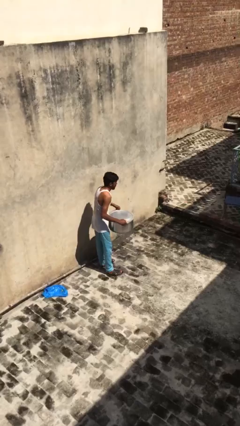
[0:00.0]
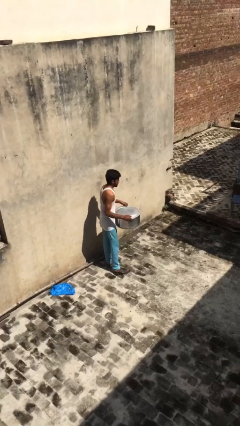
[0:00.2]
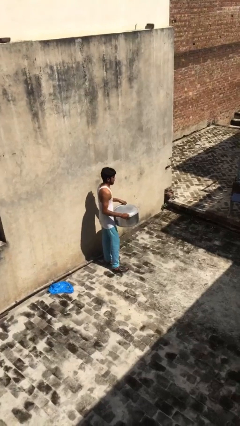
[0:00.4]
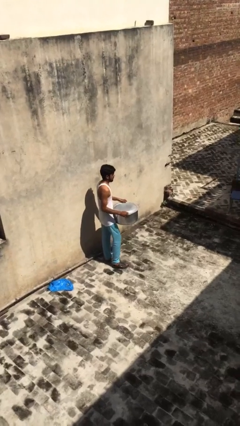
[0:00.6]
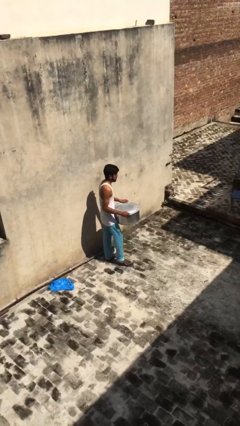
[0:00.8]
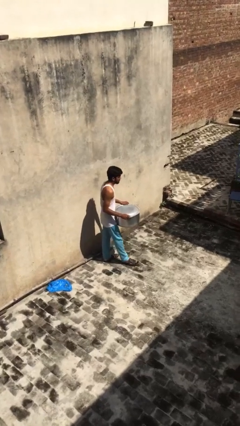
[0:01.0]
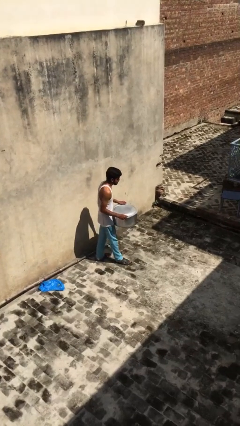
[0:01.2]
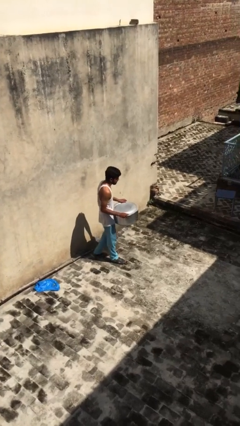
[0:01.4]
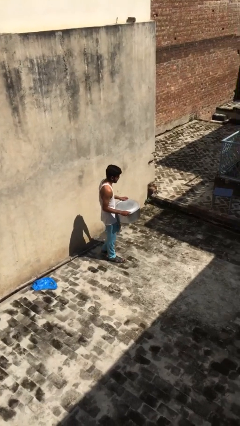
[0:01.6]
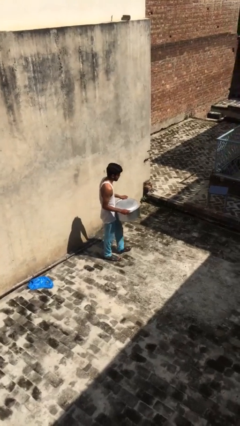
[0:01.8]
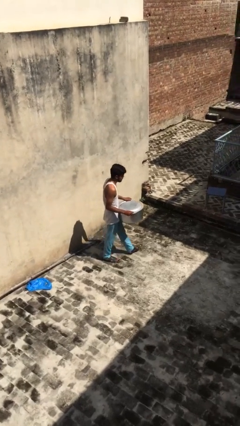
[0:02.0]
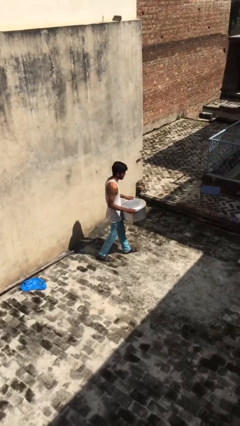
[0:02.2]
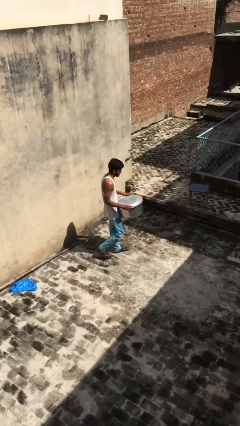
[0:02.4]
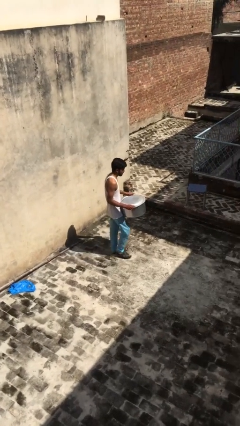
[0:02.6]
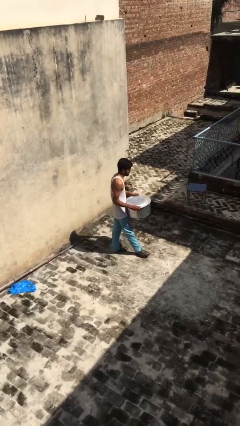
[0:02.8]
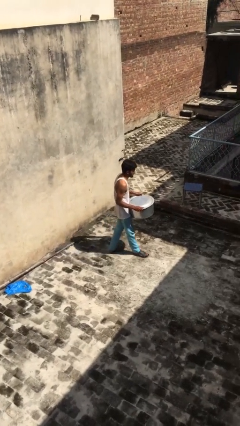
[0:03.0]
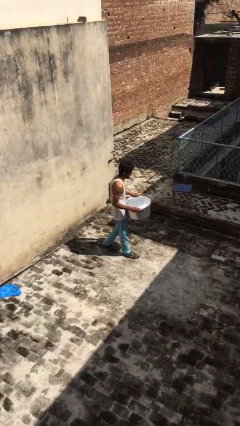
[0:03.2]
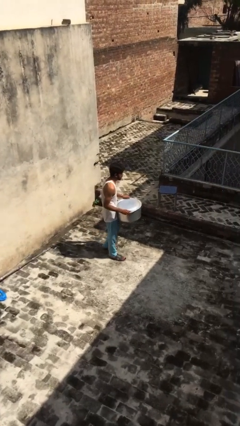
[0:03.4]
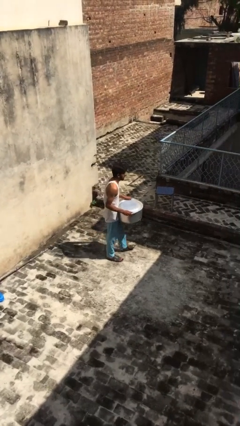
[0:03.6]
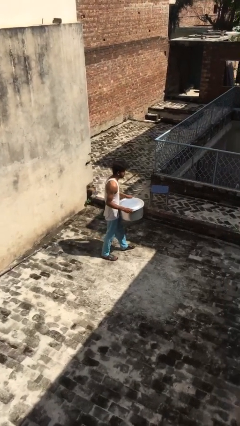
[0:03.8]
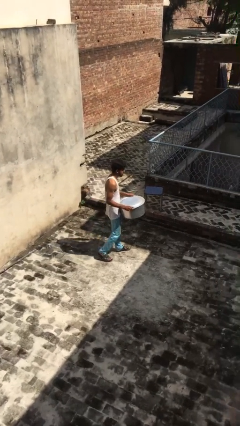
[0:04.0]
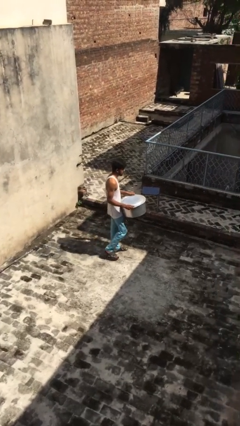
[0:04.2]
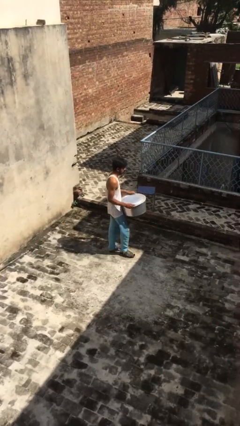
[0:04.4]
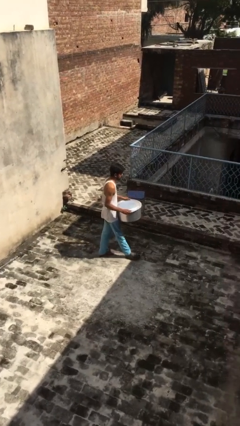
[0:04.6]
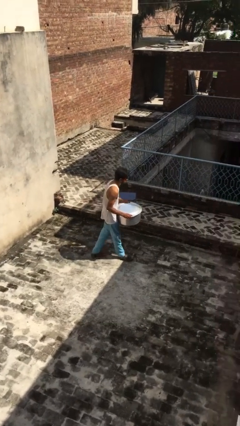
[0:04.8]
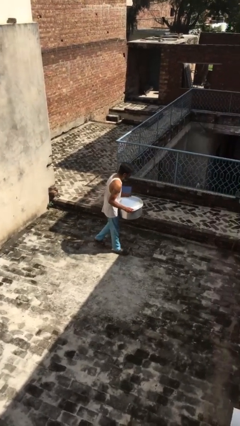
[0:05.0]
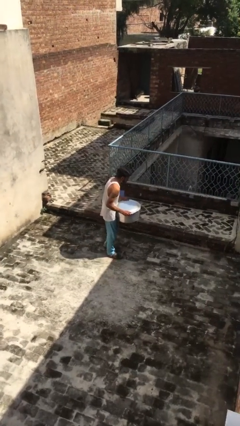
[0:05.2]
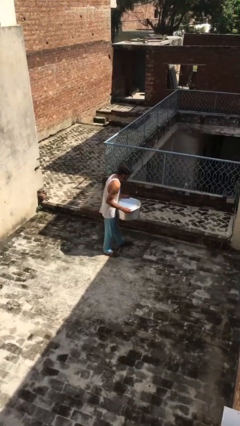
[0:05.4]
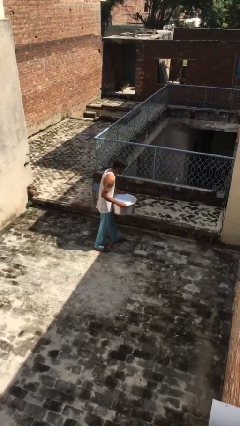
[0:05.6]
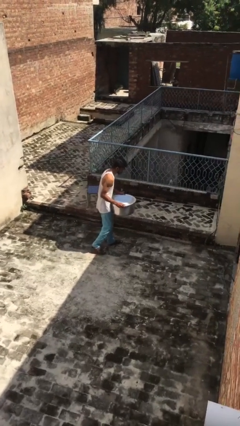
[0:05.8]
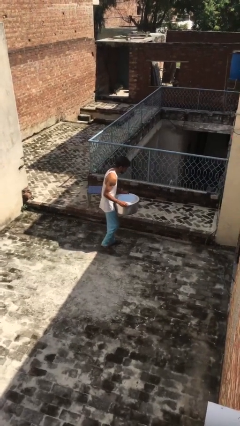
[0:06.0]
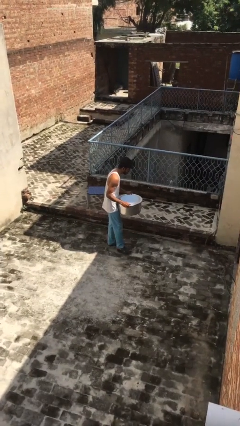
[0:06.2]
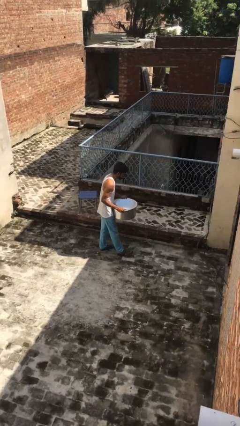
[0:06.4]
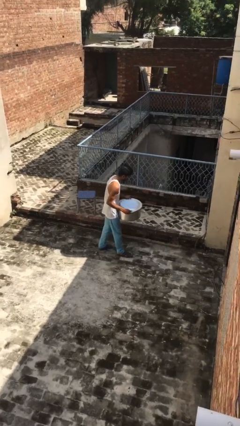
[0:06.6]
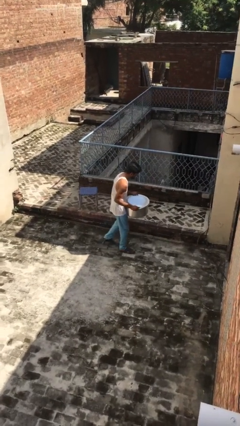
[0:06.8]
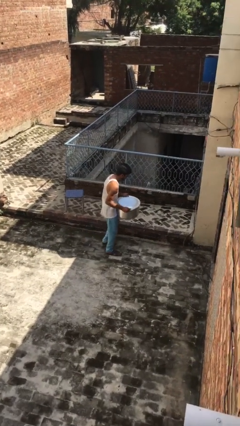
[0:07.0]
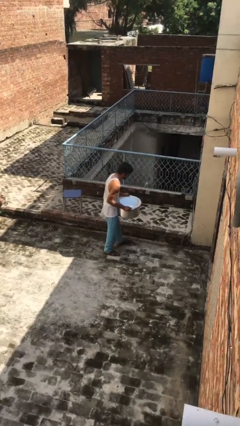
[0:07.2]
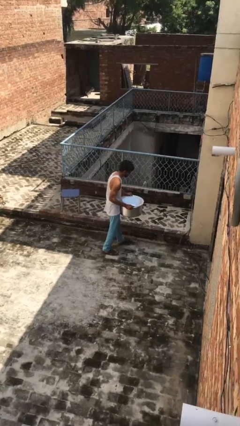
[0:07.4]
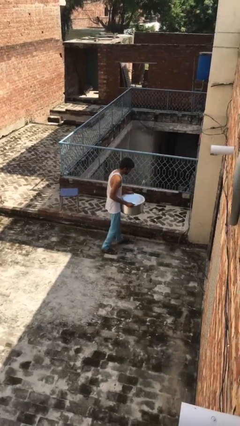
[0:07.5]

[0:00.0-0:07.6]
person carries heavy object

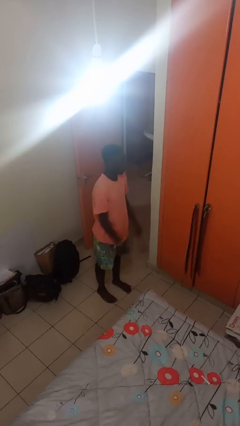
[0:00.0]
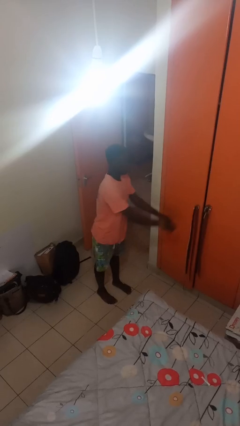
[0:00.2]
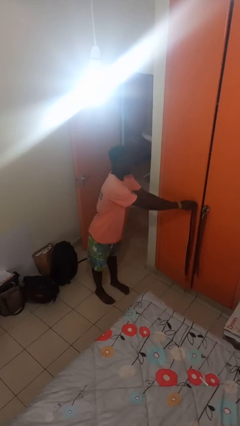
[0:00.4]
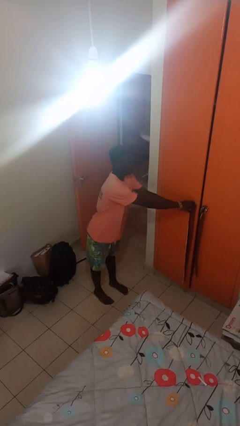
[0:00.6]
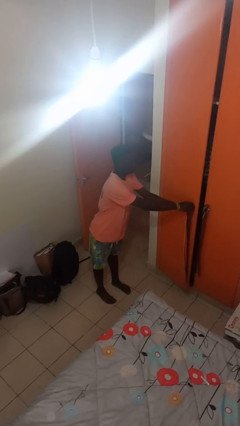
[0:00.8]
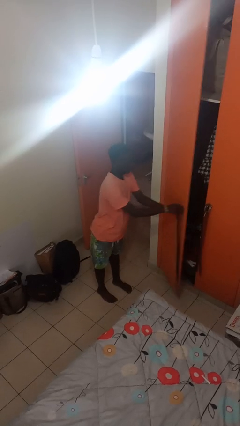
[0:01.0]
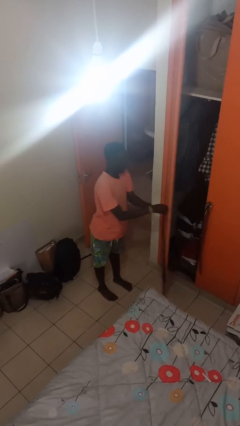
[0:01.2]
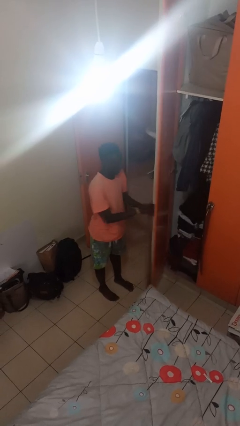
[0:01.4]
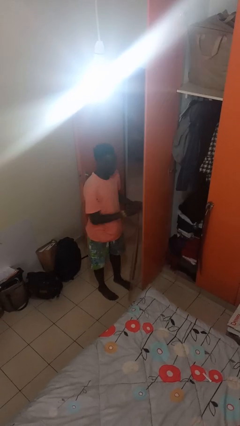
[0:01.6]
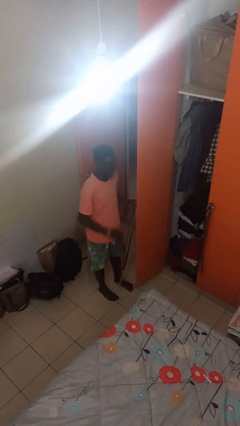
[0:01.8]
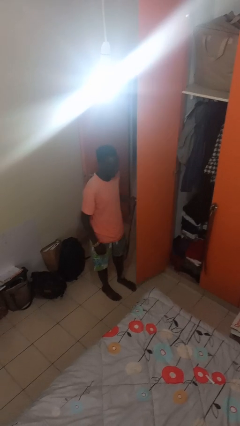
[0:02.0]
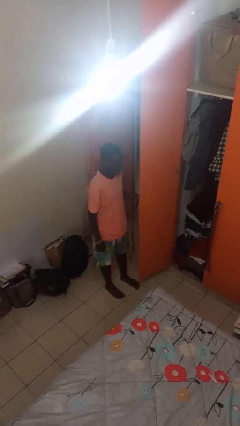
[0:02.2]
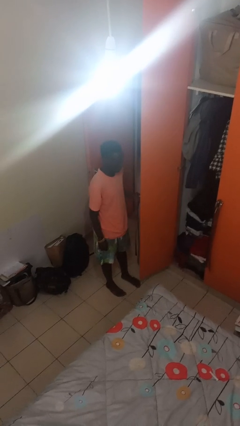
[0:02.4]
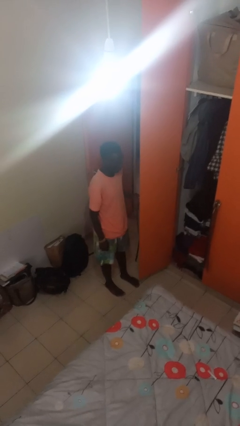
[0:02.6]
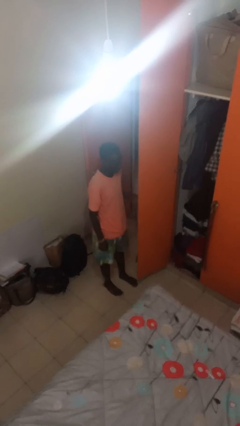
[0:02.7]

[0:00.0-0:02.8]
person opens closet door

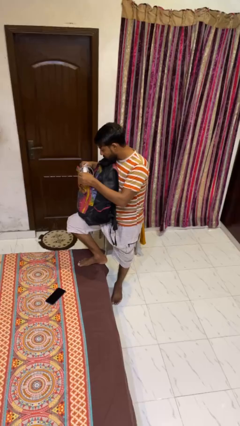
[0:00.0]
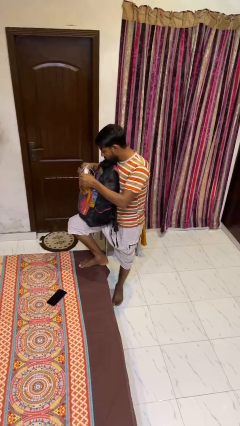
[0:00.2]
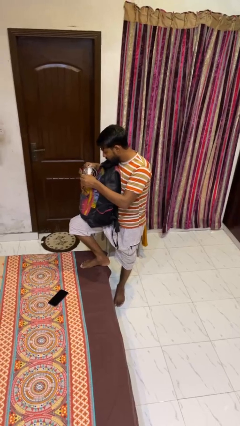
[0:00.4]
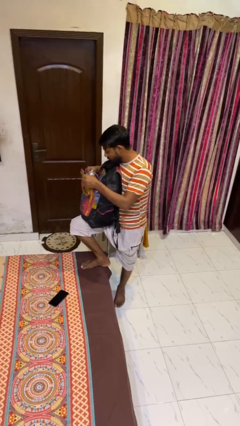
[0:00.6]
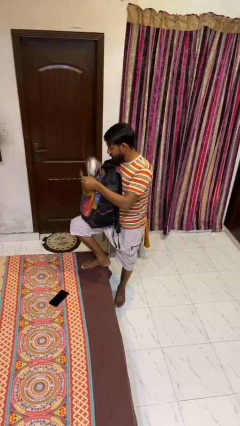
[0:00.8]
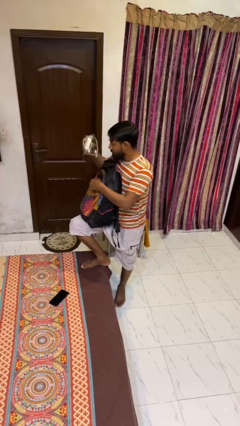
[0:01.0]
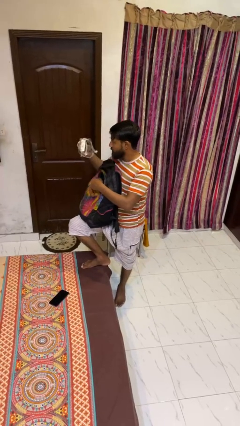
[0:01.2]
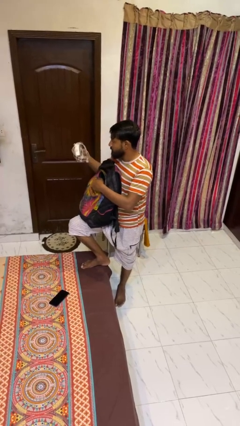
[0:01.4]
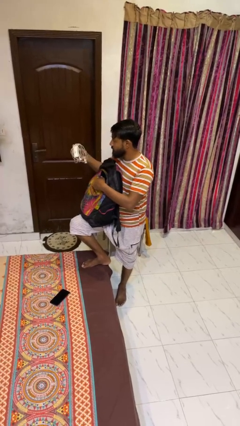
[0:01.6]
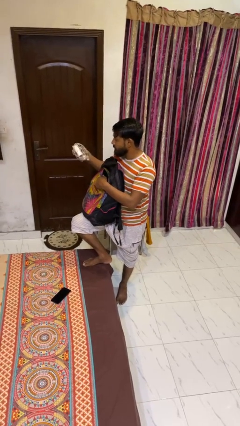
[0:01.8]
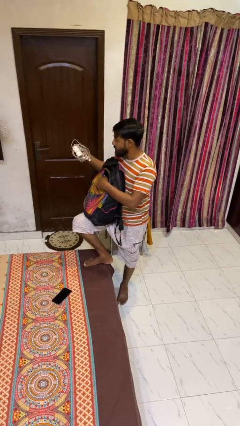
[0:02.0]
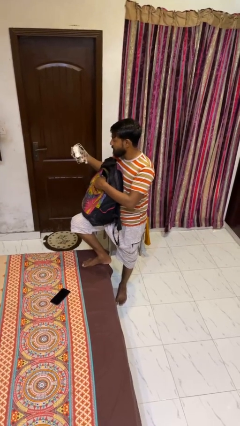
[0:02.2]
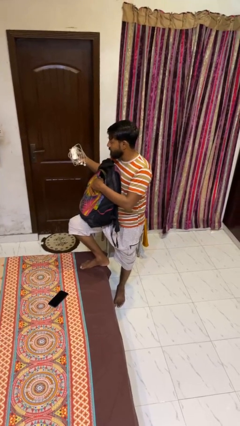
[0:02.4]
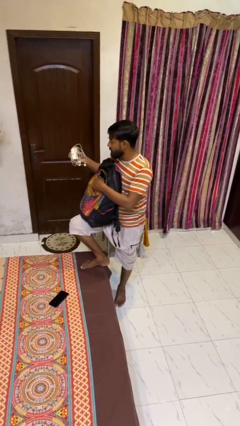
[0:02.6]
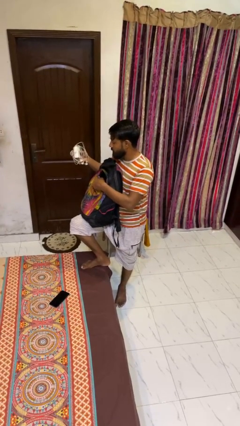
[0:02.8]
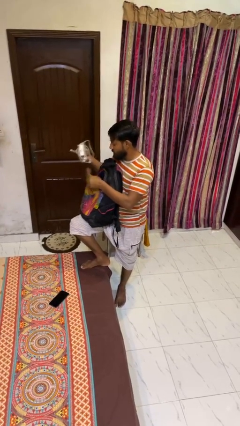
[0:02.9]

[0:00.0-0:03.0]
person takes object from backpack

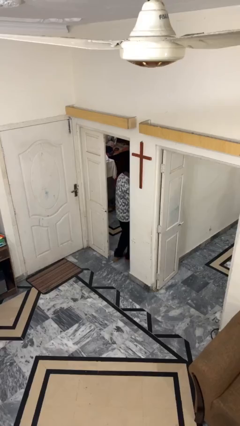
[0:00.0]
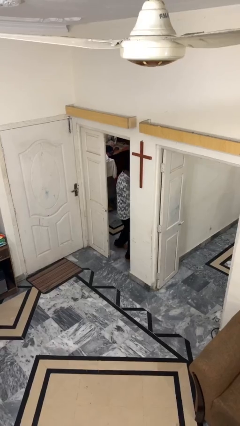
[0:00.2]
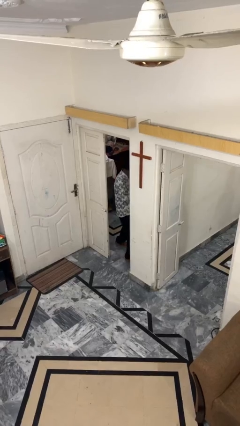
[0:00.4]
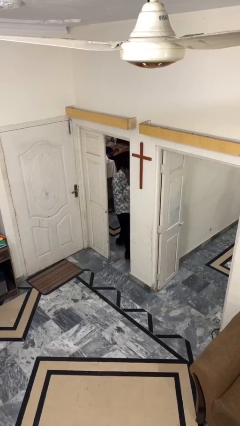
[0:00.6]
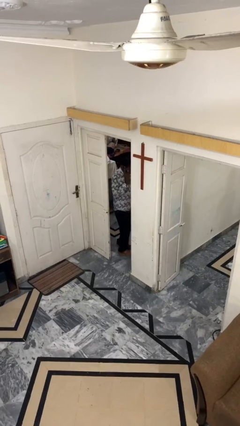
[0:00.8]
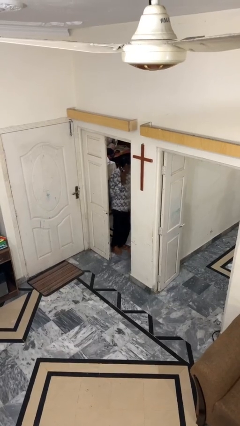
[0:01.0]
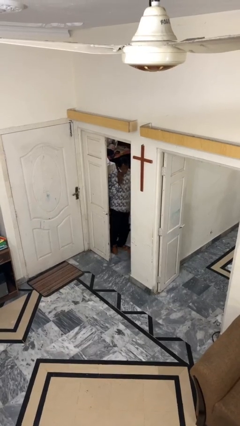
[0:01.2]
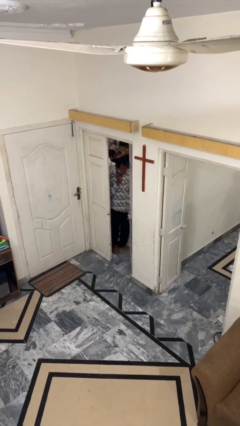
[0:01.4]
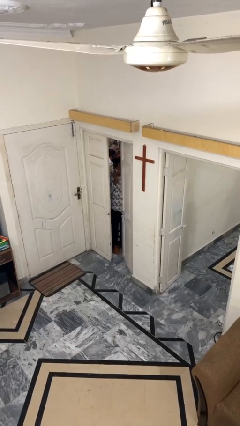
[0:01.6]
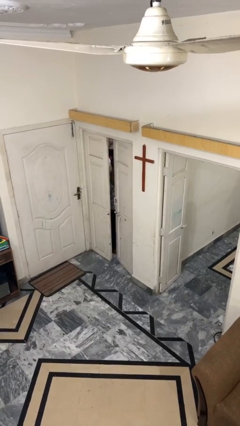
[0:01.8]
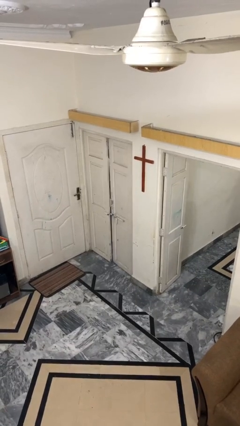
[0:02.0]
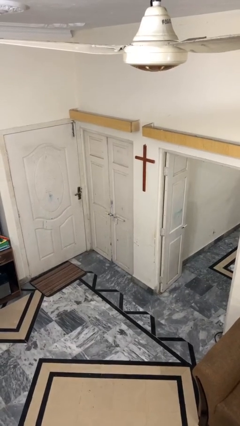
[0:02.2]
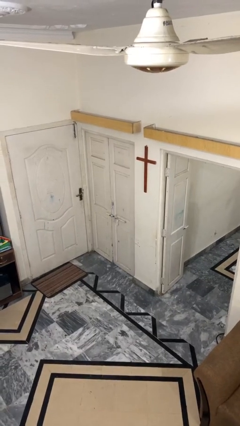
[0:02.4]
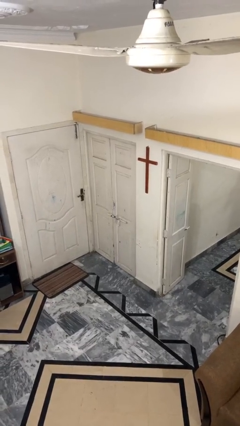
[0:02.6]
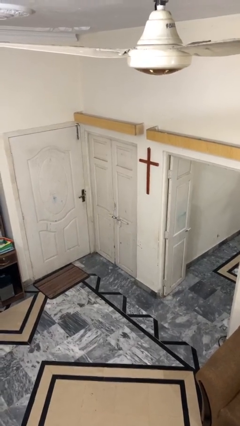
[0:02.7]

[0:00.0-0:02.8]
person closes facility door

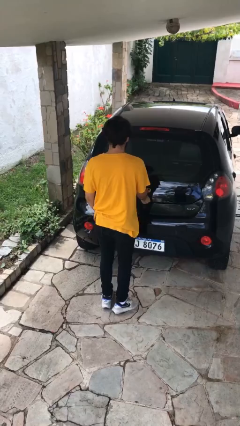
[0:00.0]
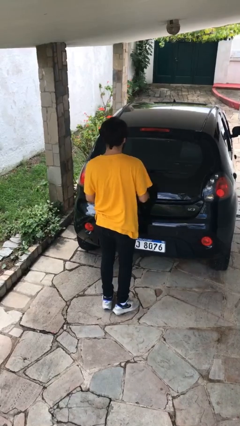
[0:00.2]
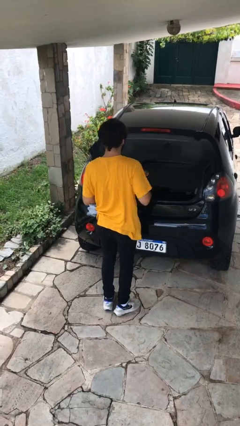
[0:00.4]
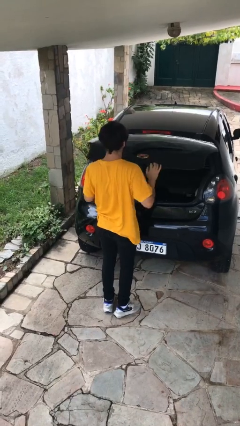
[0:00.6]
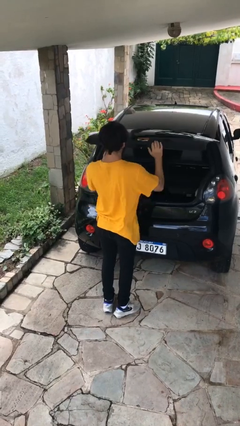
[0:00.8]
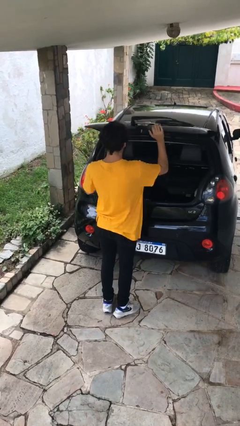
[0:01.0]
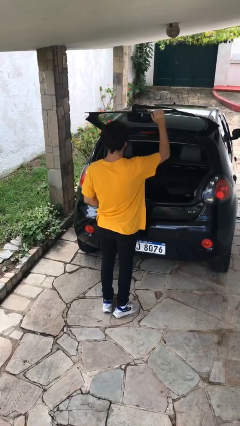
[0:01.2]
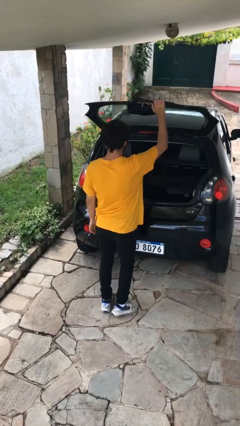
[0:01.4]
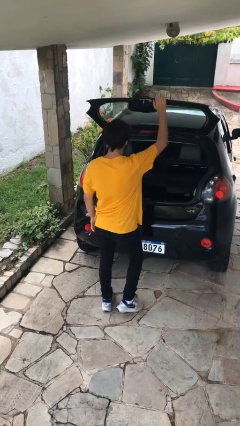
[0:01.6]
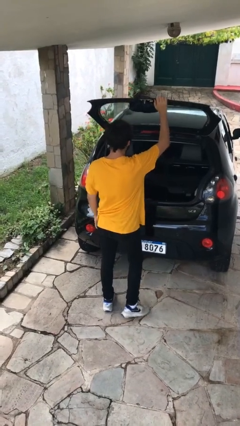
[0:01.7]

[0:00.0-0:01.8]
person opens car trunk
